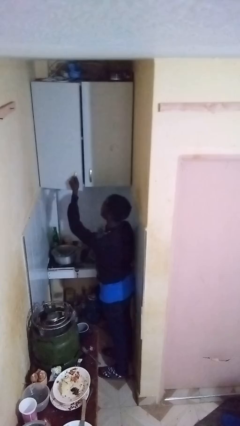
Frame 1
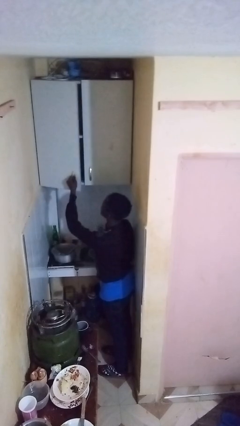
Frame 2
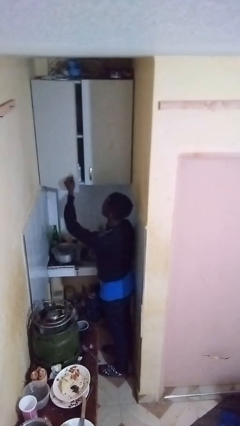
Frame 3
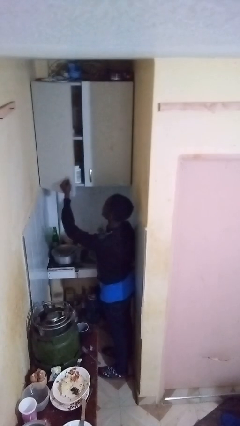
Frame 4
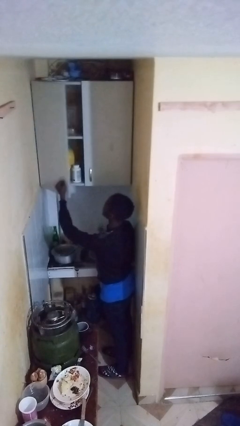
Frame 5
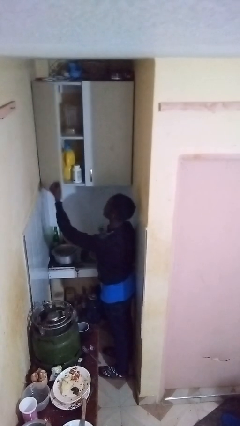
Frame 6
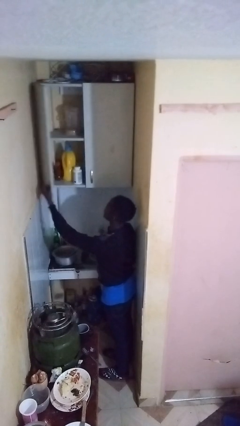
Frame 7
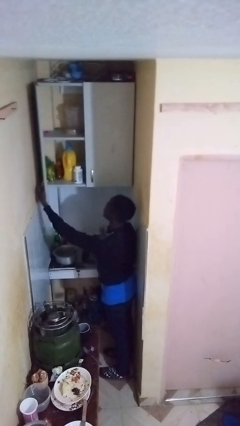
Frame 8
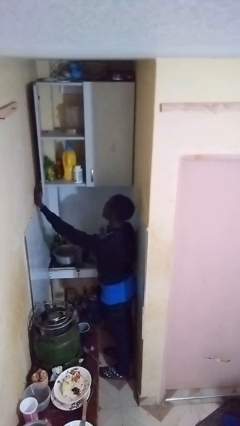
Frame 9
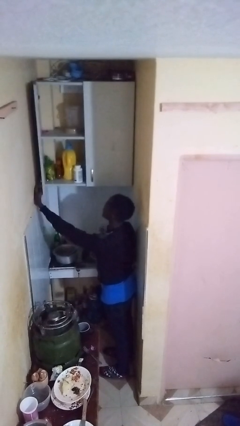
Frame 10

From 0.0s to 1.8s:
person opens kitchen drawer

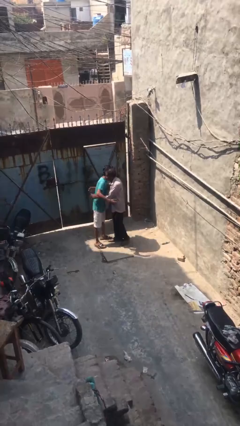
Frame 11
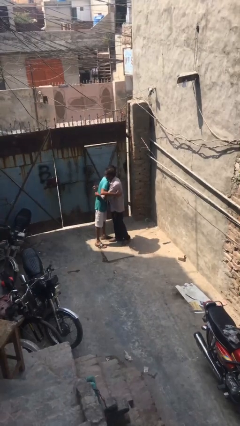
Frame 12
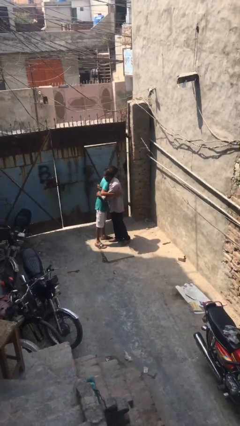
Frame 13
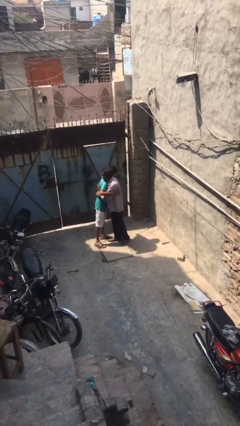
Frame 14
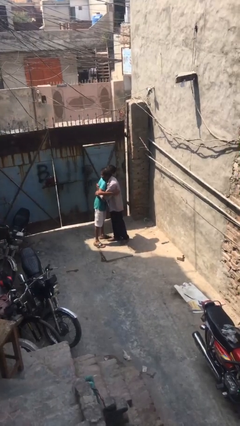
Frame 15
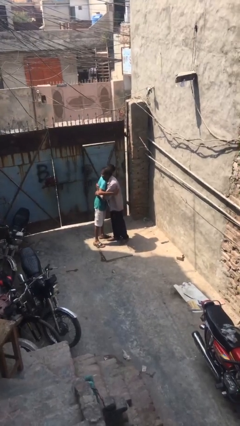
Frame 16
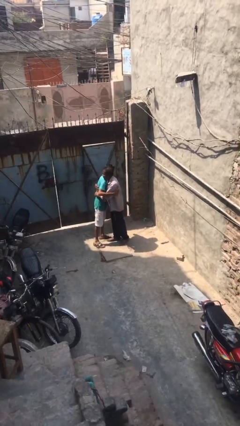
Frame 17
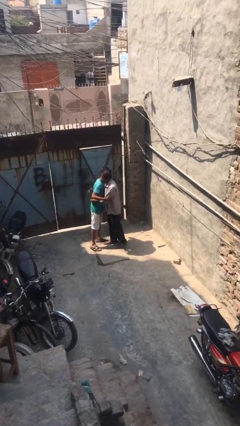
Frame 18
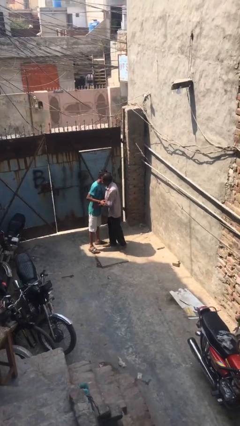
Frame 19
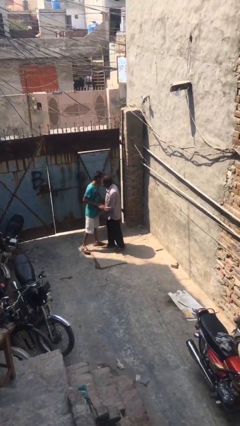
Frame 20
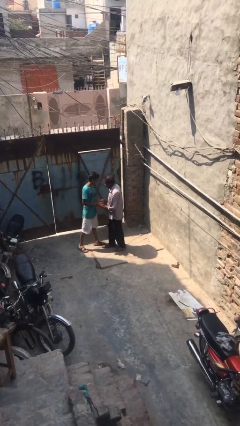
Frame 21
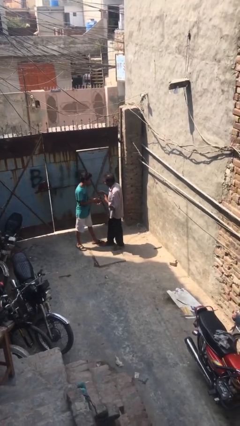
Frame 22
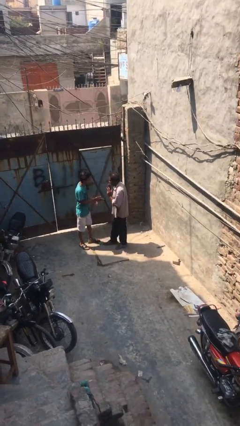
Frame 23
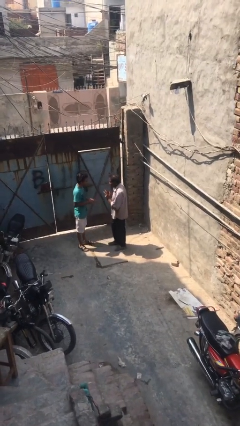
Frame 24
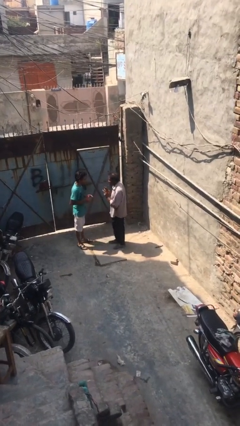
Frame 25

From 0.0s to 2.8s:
person embraces person

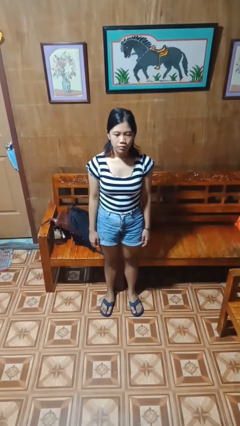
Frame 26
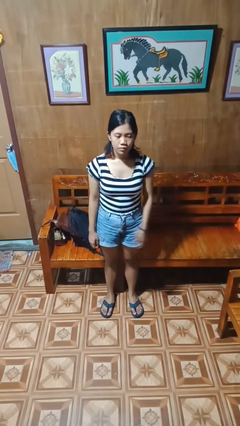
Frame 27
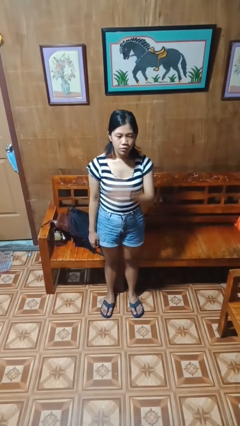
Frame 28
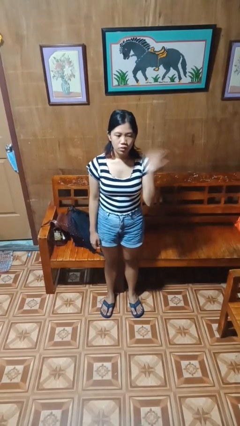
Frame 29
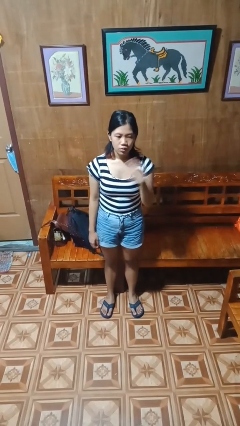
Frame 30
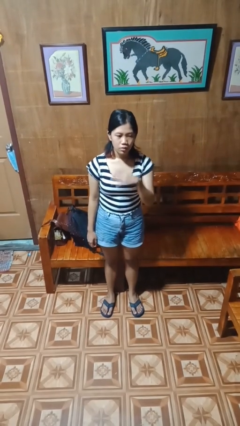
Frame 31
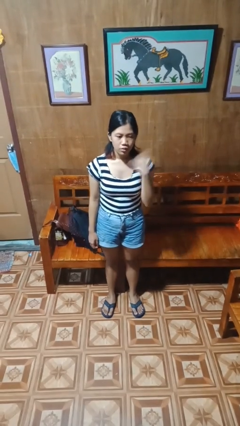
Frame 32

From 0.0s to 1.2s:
person gestures cut

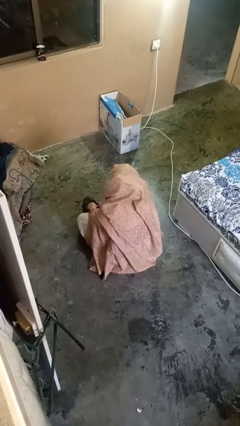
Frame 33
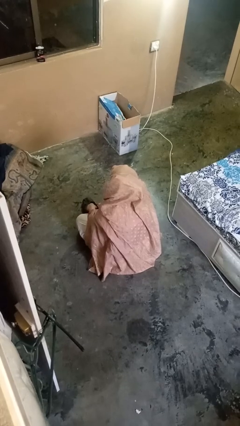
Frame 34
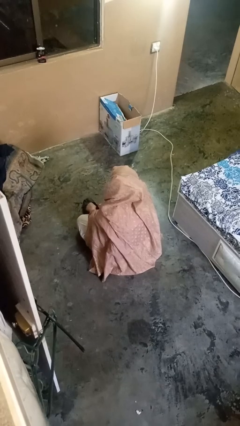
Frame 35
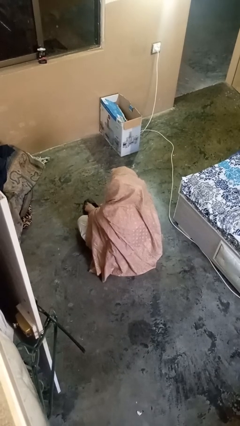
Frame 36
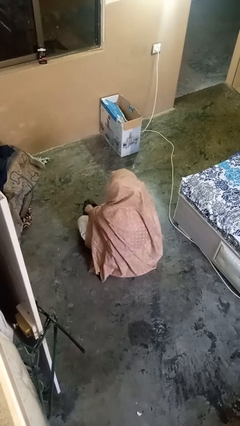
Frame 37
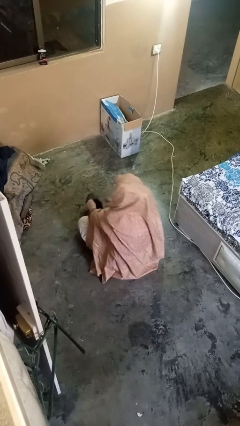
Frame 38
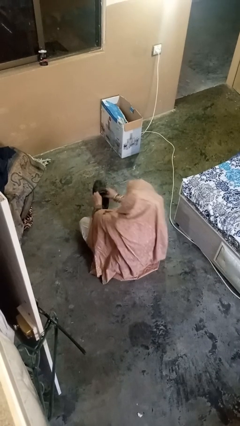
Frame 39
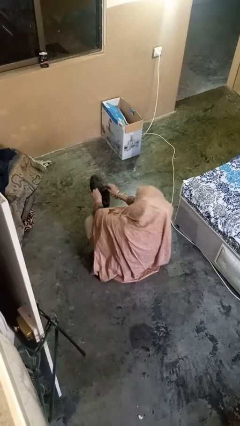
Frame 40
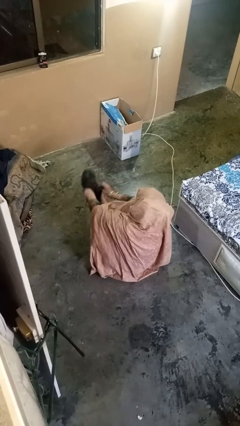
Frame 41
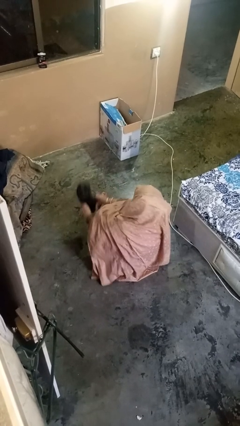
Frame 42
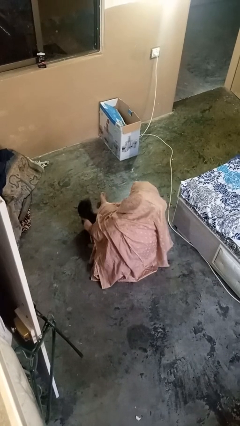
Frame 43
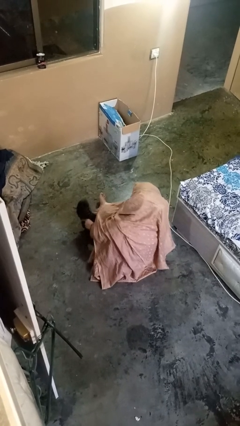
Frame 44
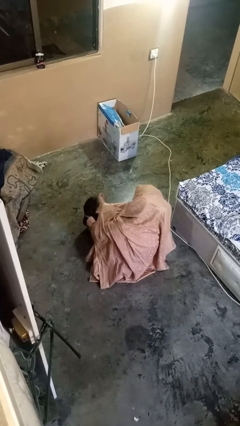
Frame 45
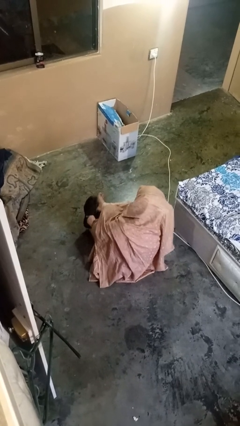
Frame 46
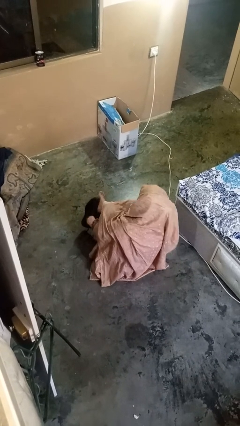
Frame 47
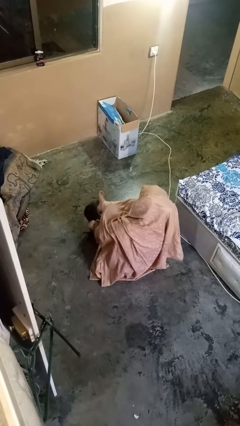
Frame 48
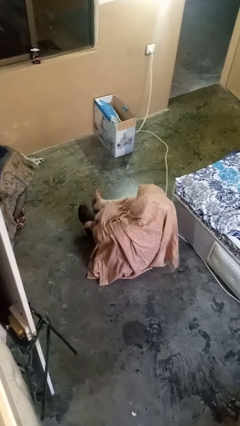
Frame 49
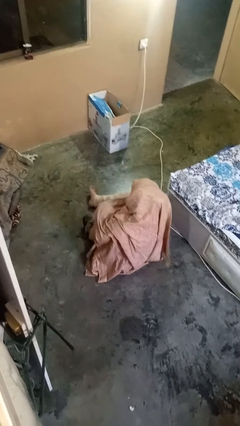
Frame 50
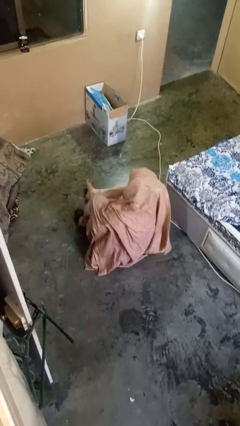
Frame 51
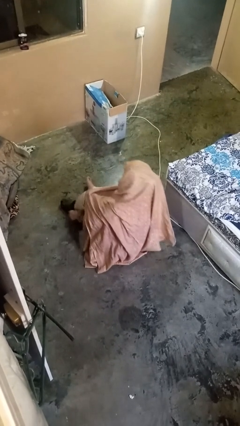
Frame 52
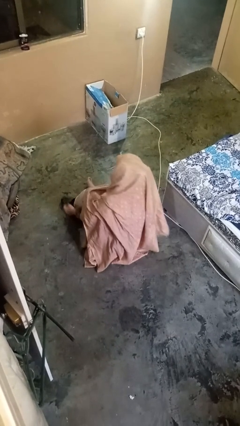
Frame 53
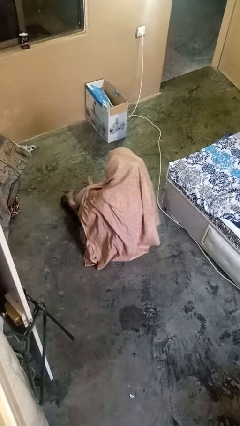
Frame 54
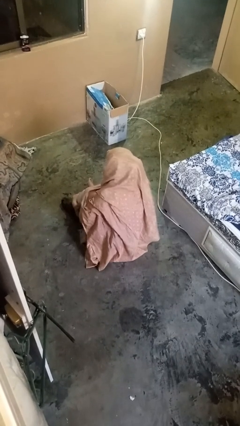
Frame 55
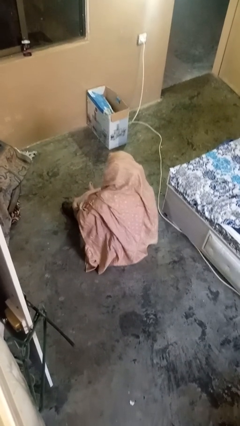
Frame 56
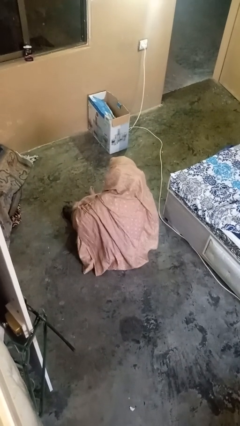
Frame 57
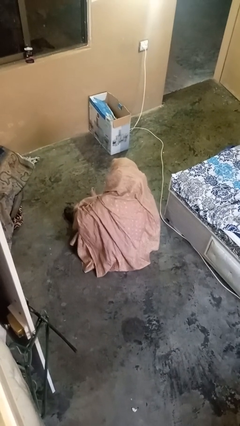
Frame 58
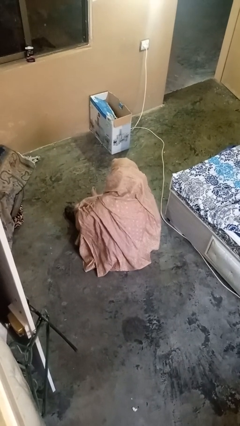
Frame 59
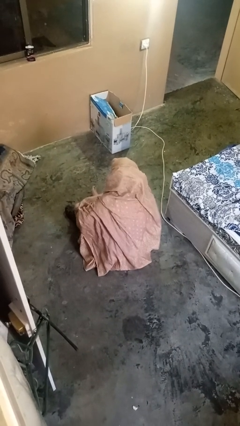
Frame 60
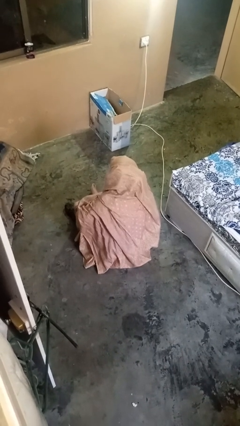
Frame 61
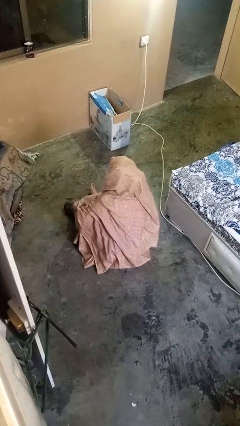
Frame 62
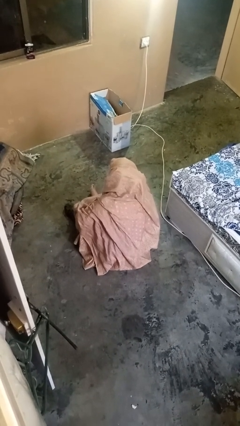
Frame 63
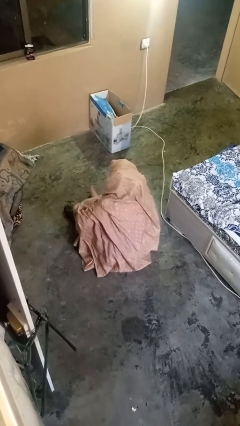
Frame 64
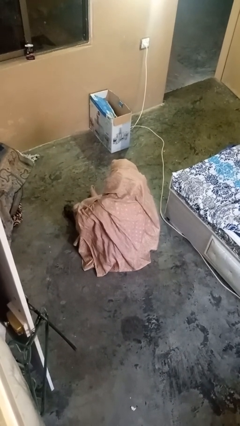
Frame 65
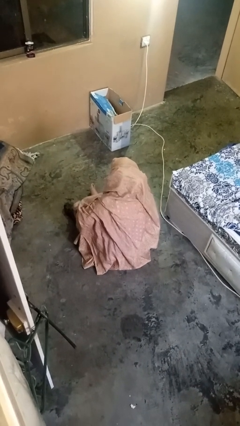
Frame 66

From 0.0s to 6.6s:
person puts on shoes

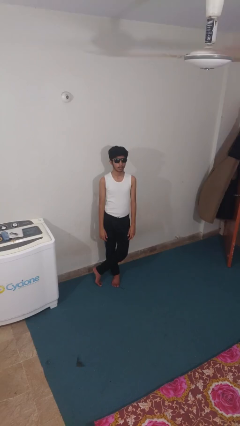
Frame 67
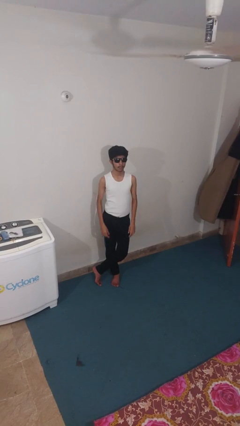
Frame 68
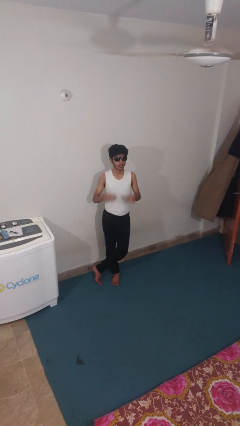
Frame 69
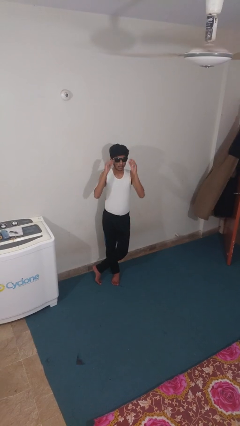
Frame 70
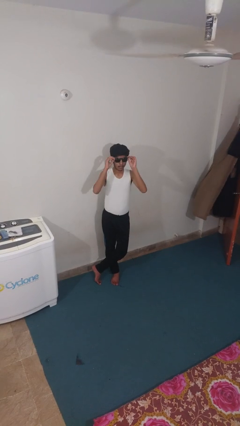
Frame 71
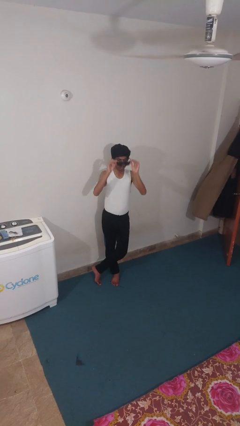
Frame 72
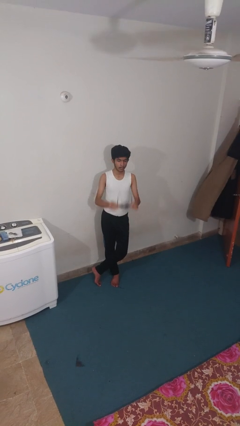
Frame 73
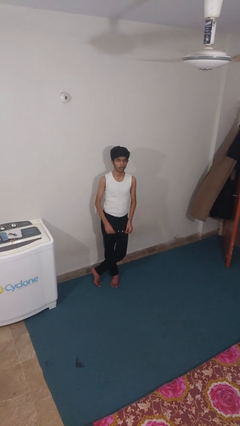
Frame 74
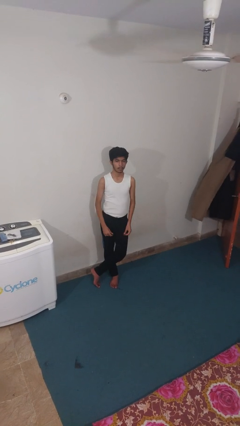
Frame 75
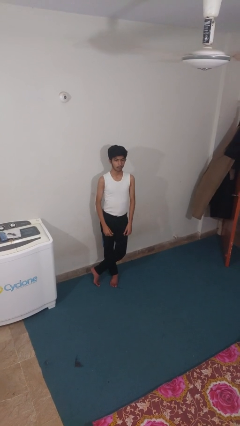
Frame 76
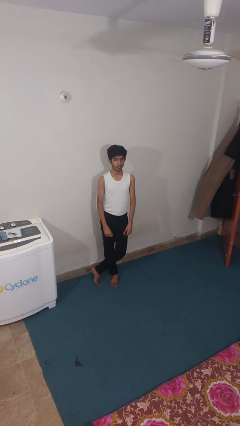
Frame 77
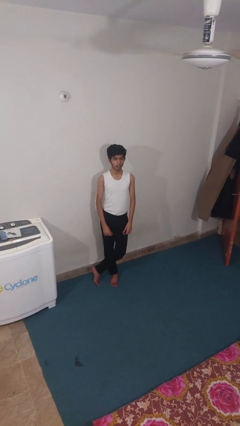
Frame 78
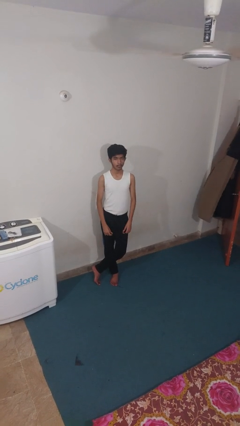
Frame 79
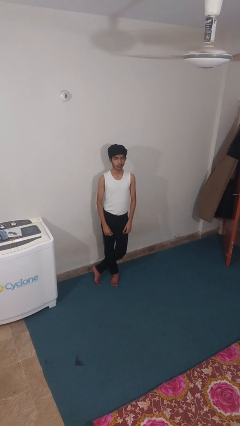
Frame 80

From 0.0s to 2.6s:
person takes off sunglasses

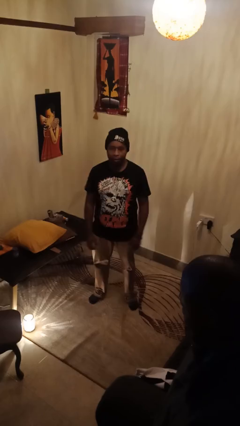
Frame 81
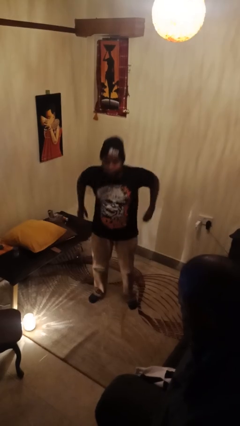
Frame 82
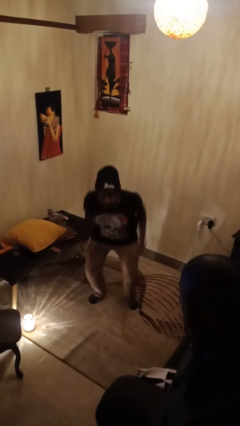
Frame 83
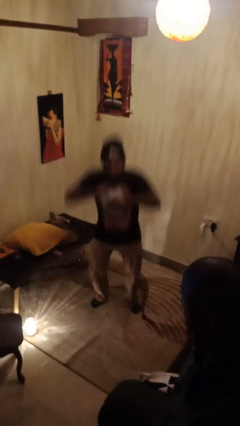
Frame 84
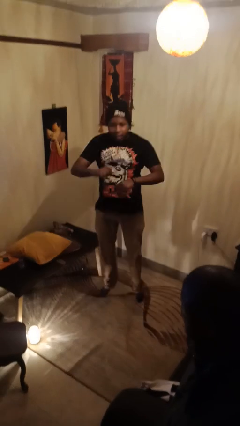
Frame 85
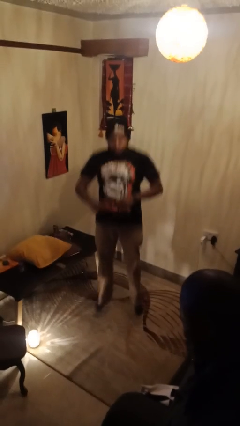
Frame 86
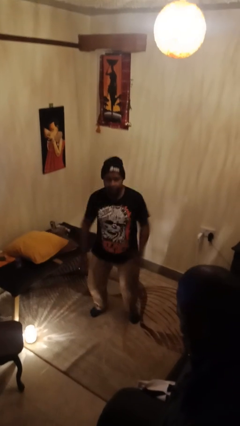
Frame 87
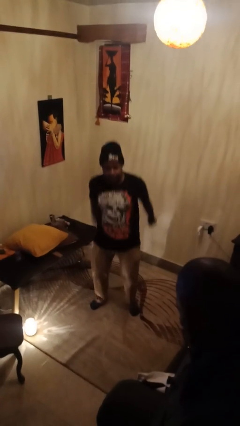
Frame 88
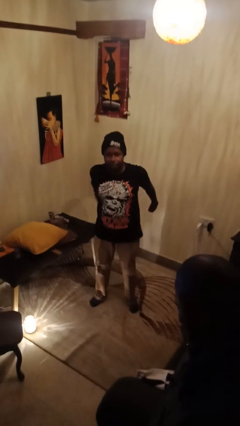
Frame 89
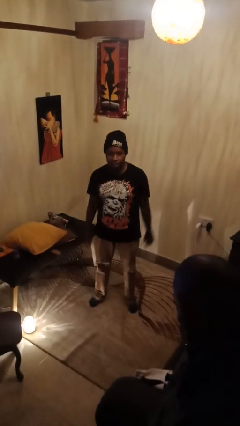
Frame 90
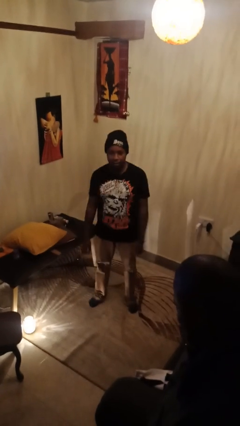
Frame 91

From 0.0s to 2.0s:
person jumps
